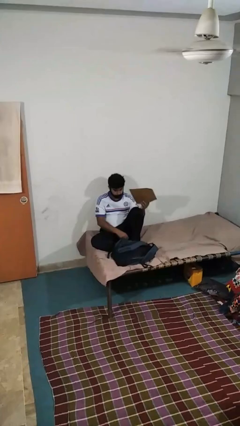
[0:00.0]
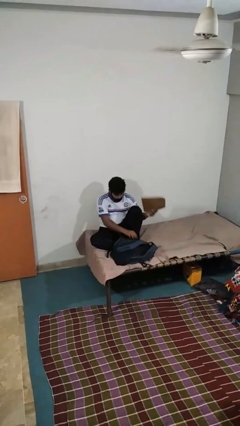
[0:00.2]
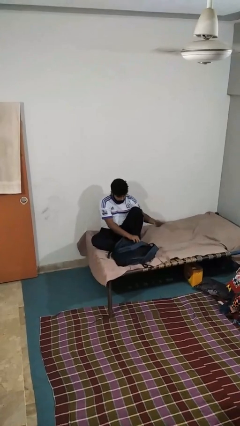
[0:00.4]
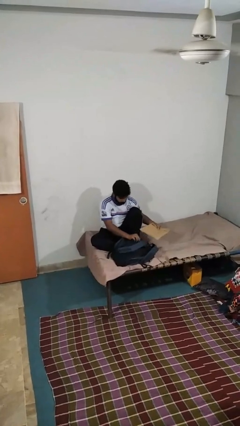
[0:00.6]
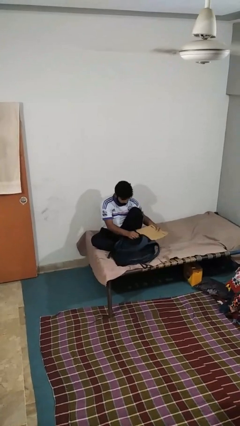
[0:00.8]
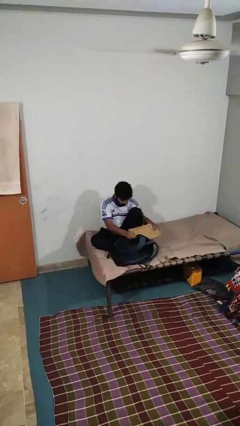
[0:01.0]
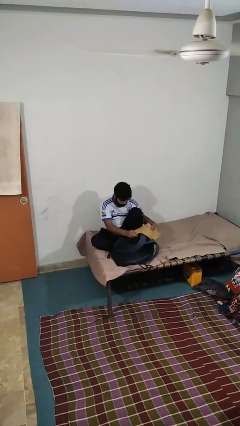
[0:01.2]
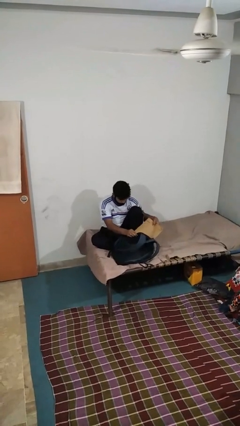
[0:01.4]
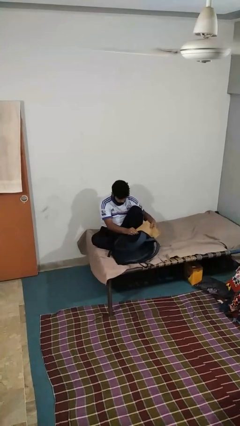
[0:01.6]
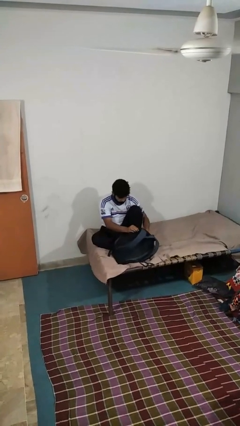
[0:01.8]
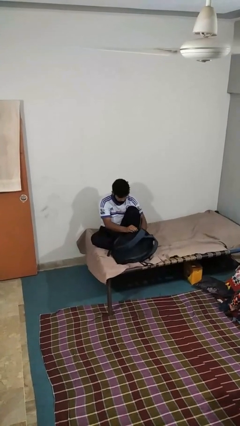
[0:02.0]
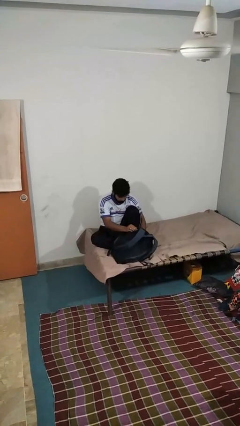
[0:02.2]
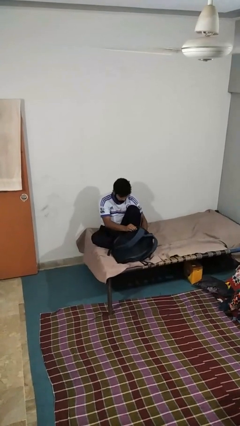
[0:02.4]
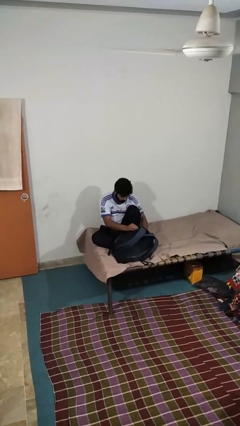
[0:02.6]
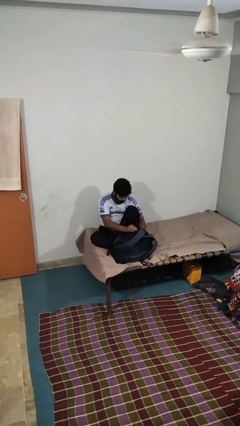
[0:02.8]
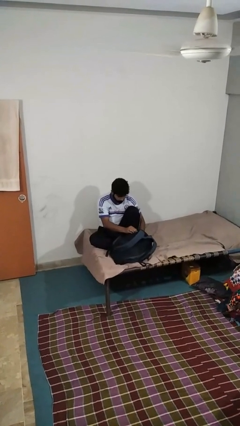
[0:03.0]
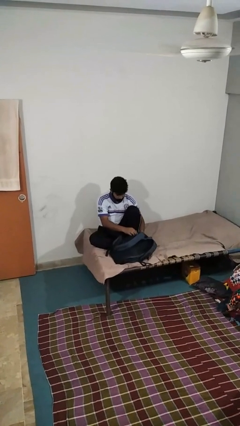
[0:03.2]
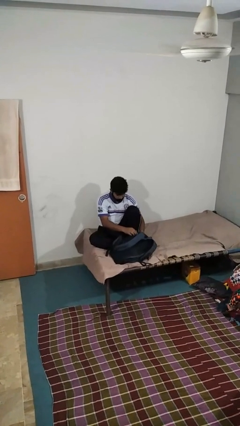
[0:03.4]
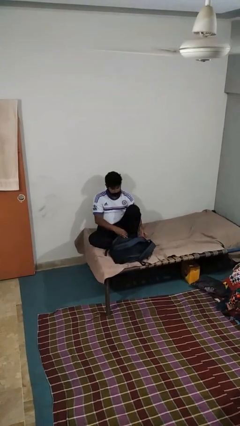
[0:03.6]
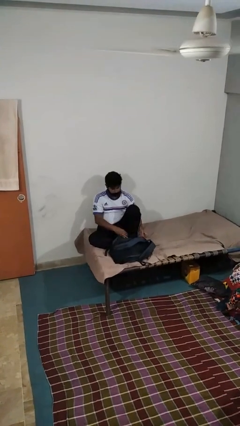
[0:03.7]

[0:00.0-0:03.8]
person puts object into backpack

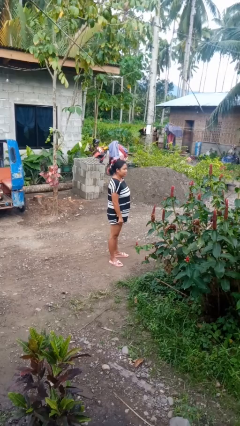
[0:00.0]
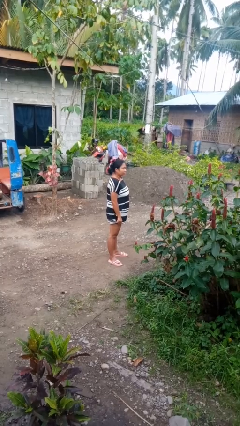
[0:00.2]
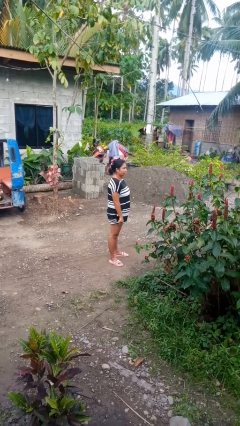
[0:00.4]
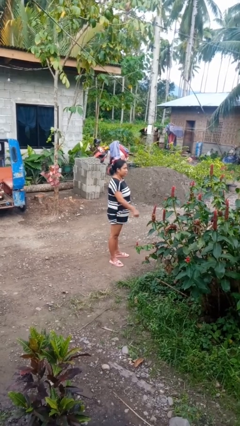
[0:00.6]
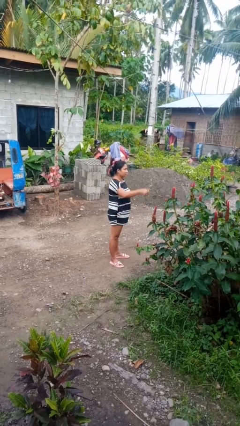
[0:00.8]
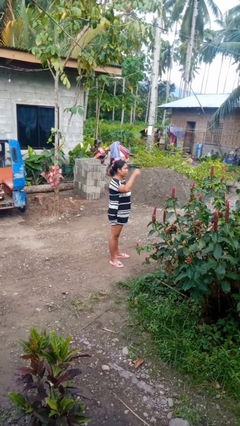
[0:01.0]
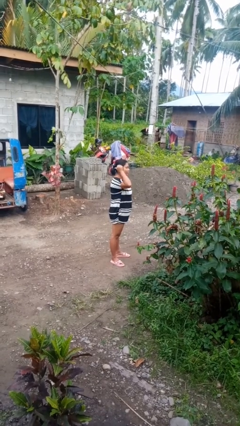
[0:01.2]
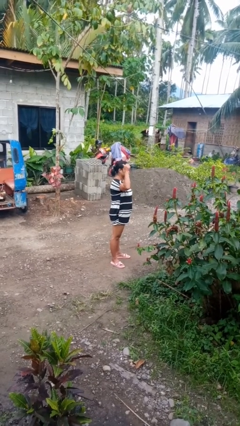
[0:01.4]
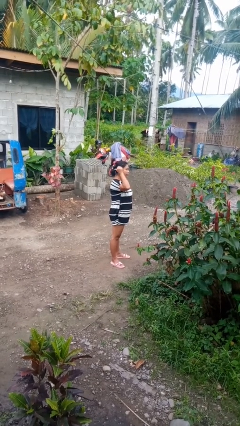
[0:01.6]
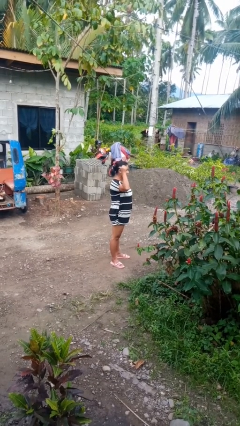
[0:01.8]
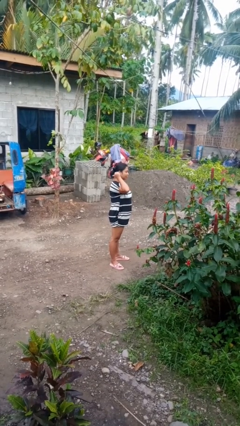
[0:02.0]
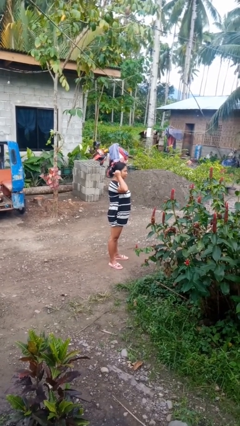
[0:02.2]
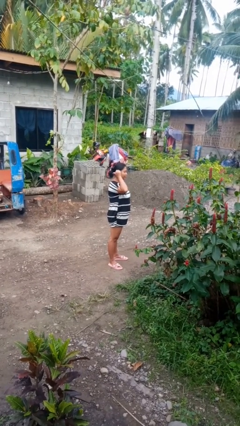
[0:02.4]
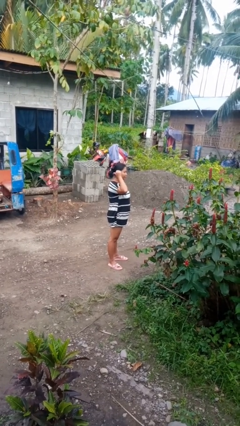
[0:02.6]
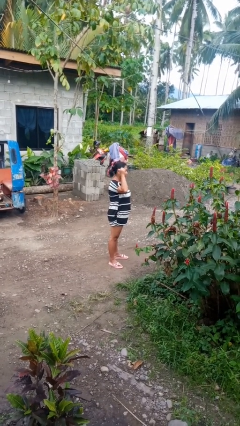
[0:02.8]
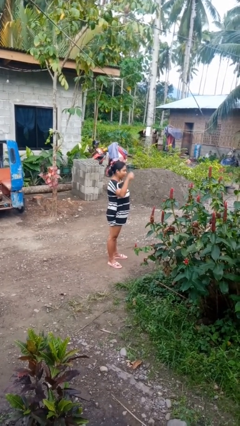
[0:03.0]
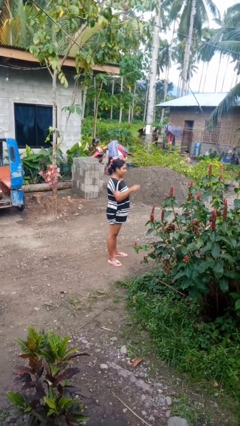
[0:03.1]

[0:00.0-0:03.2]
person gestures behind me

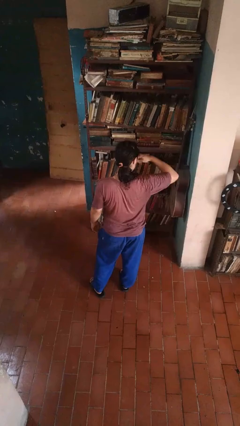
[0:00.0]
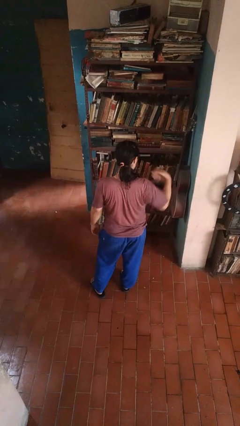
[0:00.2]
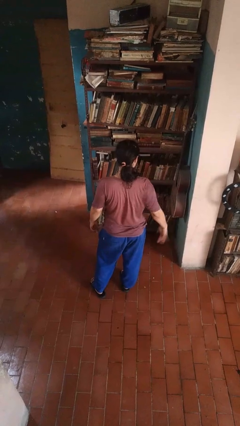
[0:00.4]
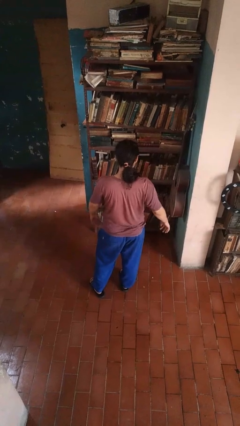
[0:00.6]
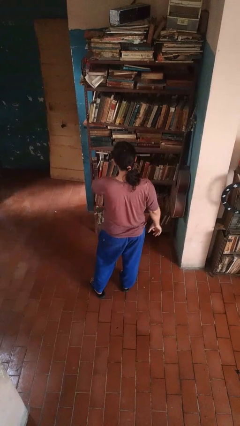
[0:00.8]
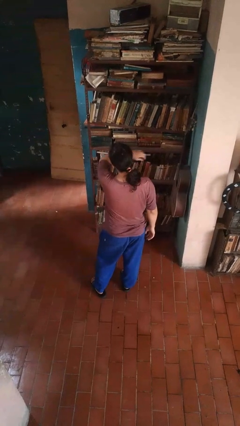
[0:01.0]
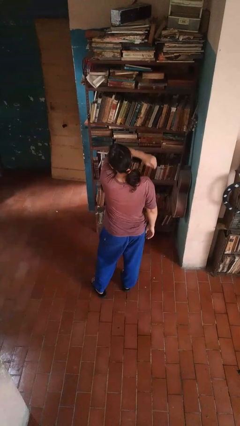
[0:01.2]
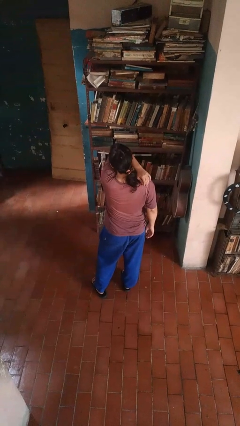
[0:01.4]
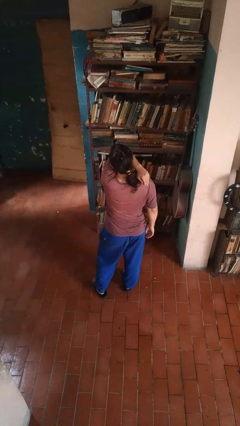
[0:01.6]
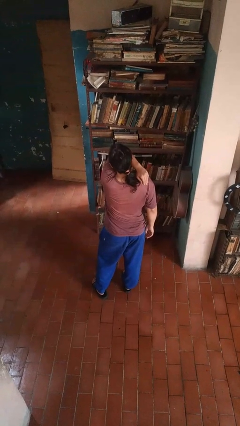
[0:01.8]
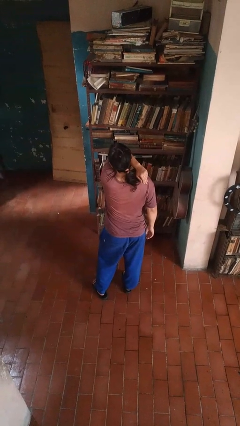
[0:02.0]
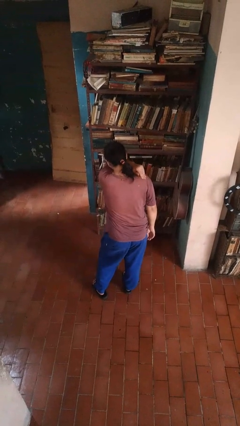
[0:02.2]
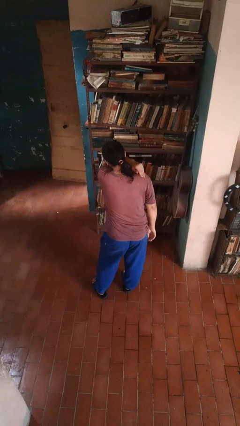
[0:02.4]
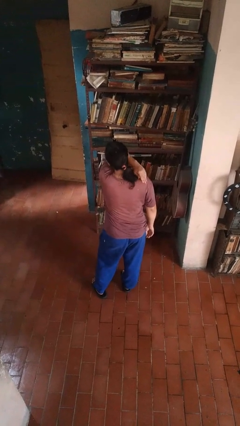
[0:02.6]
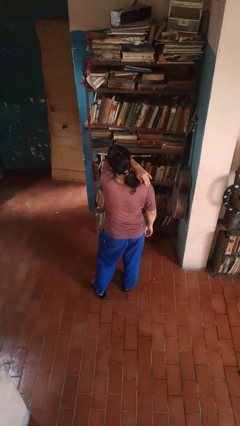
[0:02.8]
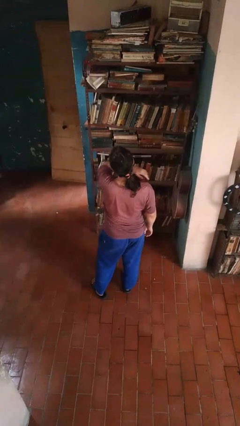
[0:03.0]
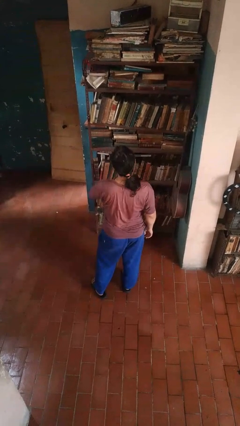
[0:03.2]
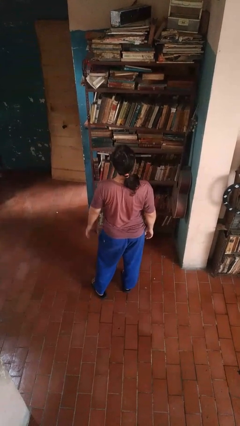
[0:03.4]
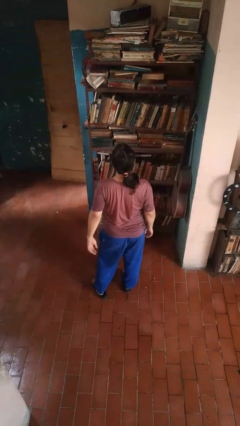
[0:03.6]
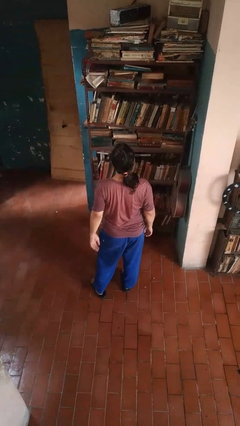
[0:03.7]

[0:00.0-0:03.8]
person sneezes into arm

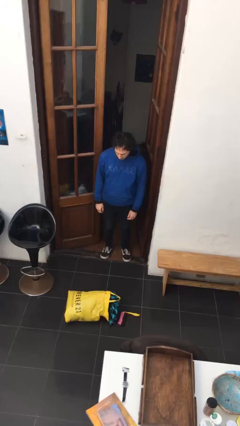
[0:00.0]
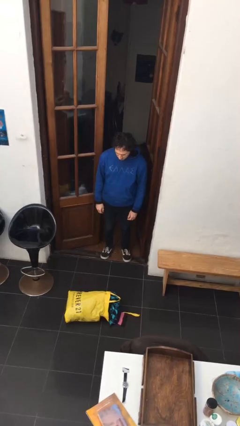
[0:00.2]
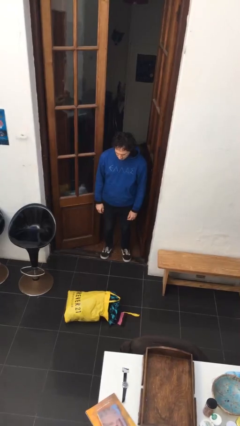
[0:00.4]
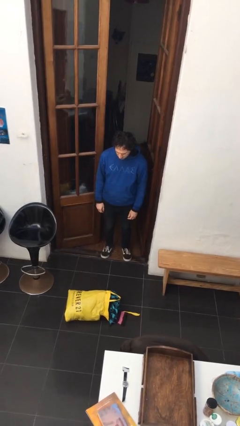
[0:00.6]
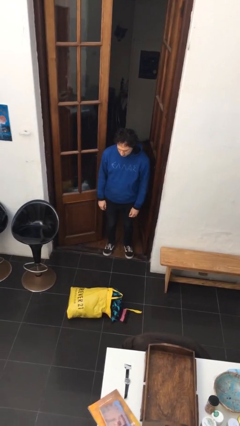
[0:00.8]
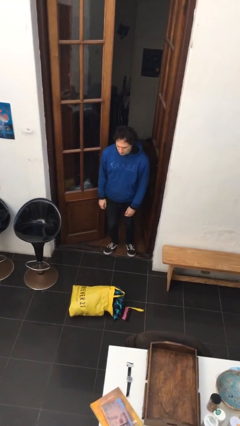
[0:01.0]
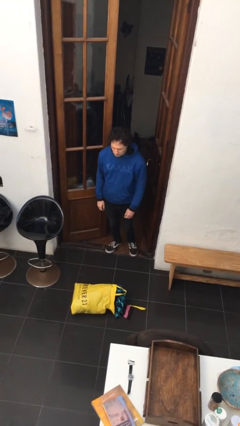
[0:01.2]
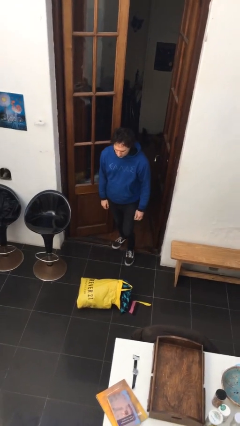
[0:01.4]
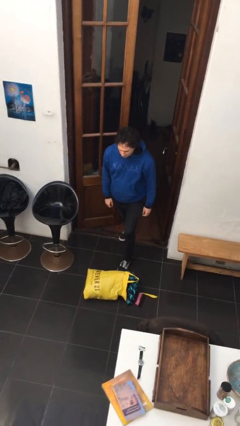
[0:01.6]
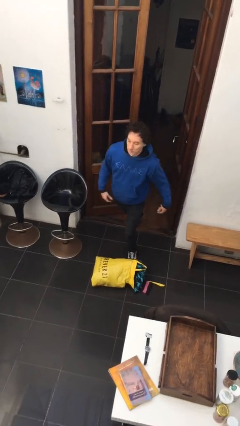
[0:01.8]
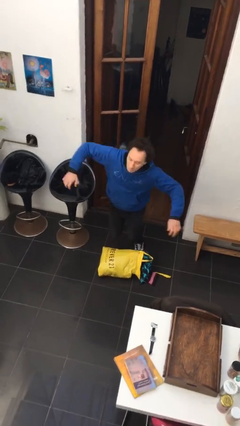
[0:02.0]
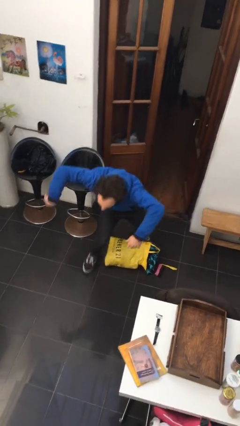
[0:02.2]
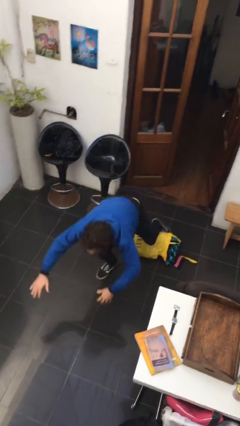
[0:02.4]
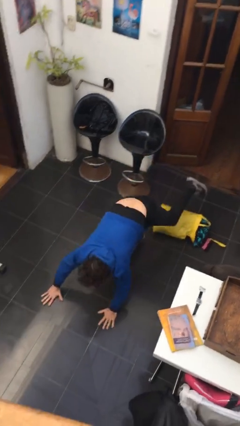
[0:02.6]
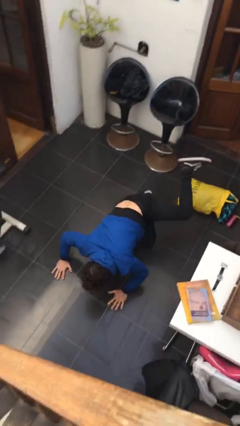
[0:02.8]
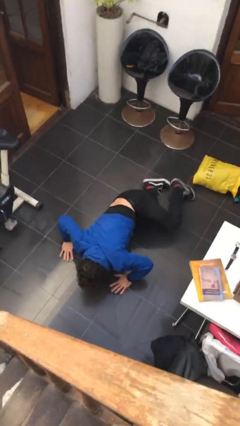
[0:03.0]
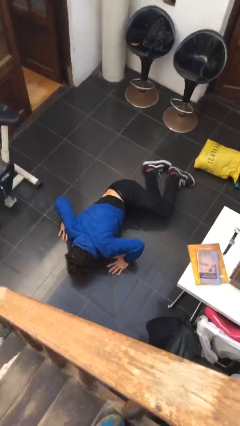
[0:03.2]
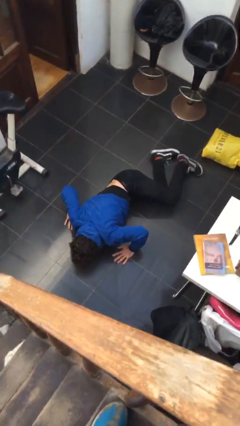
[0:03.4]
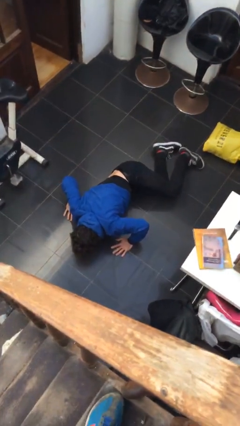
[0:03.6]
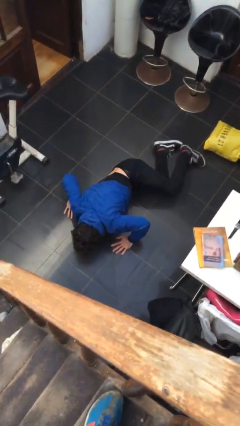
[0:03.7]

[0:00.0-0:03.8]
person trips on object on floor

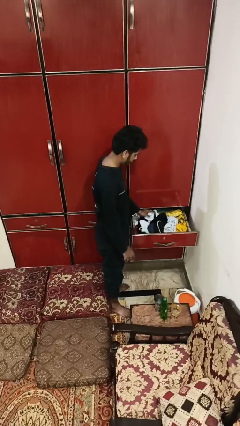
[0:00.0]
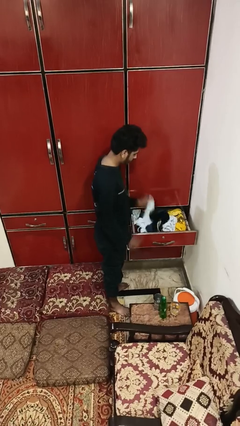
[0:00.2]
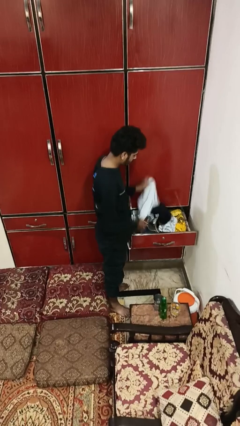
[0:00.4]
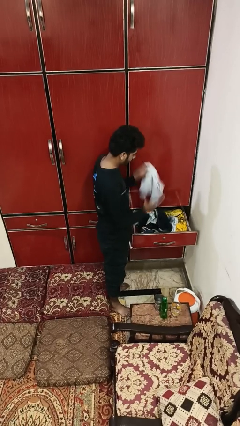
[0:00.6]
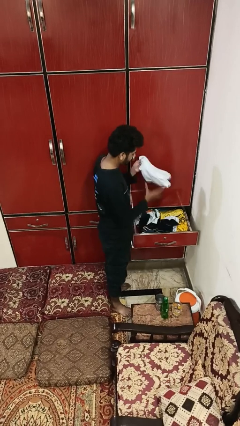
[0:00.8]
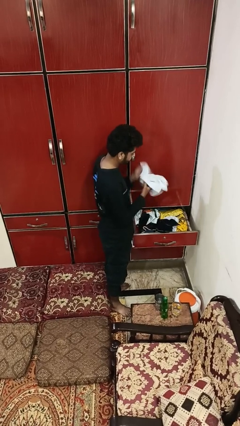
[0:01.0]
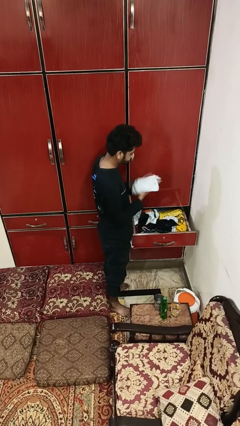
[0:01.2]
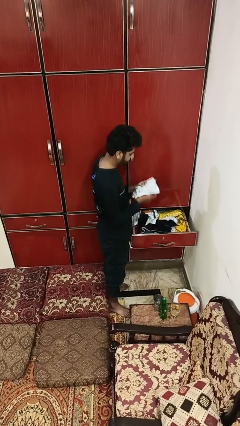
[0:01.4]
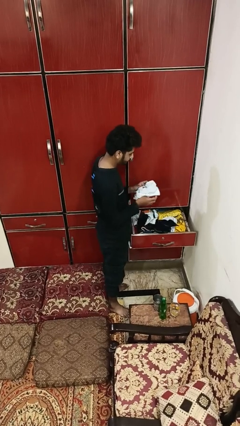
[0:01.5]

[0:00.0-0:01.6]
person takes clothes from dresser

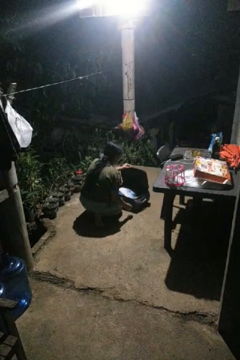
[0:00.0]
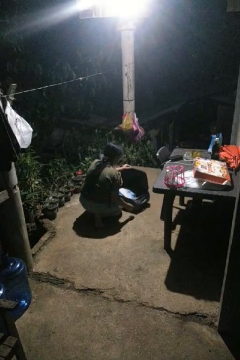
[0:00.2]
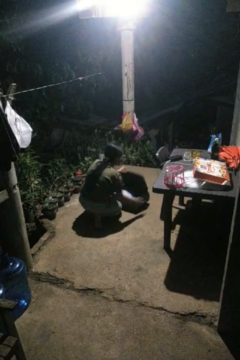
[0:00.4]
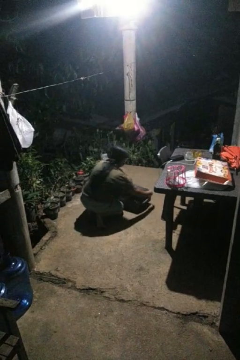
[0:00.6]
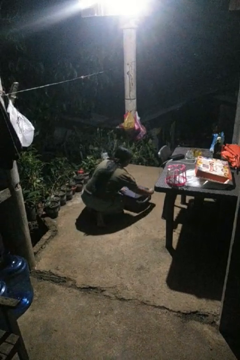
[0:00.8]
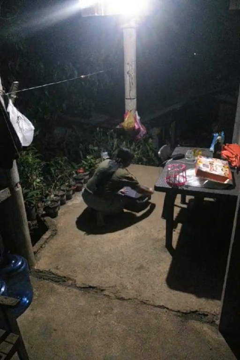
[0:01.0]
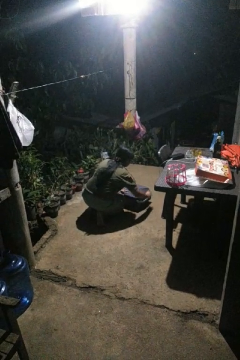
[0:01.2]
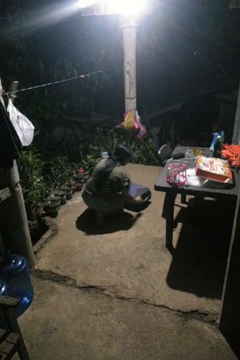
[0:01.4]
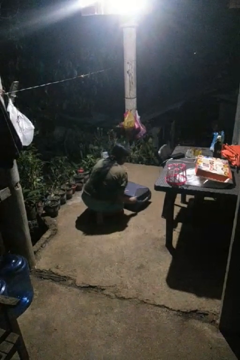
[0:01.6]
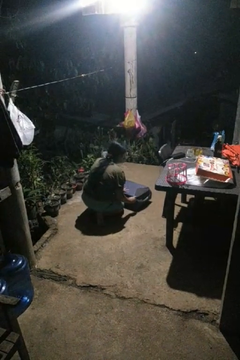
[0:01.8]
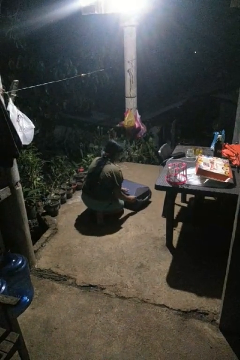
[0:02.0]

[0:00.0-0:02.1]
person closes suitcase
